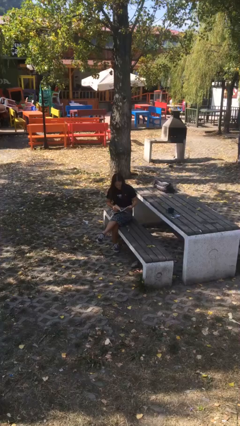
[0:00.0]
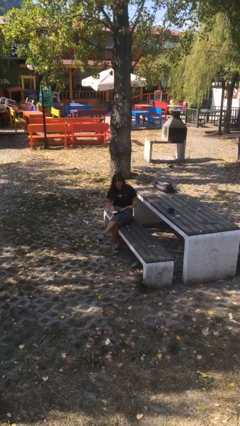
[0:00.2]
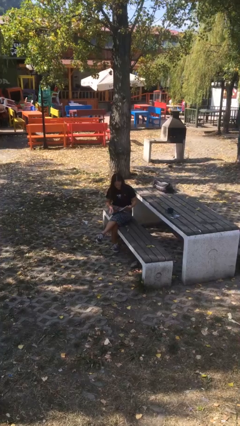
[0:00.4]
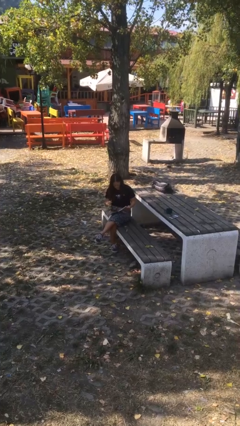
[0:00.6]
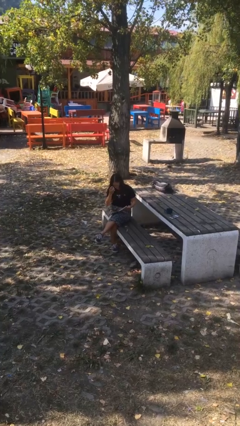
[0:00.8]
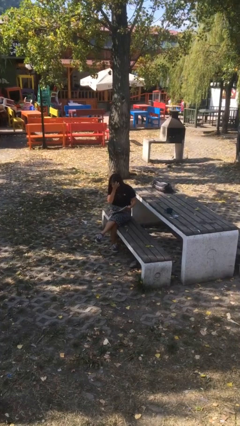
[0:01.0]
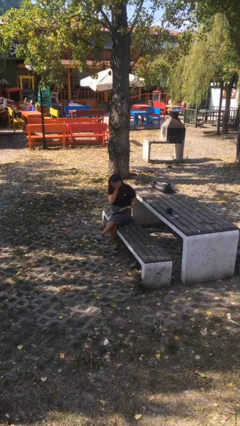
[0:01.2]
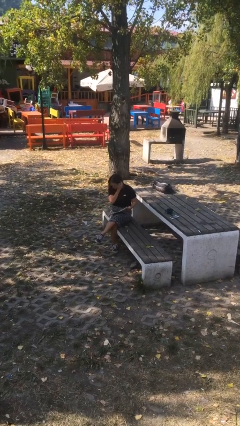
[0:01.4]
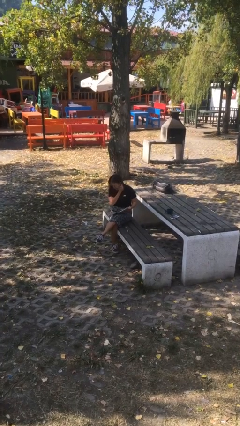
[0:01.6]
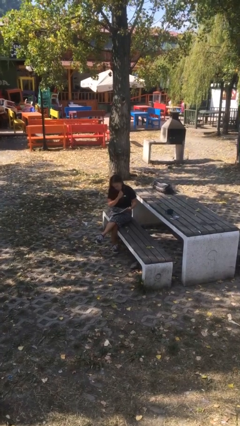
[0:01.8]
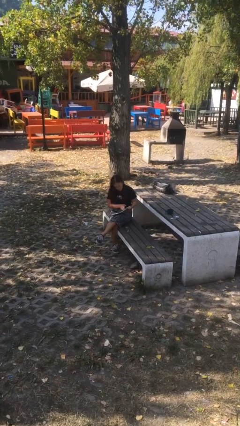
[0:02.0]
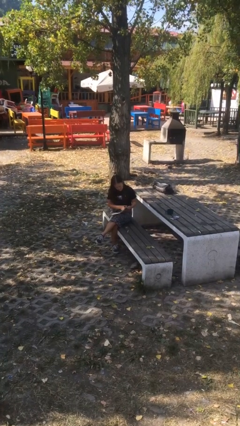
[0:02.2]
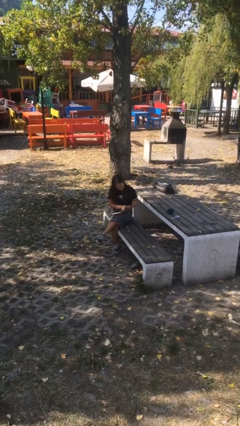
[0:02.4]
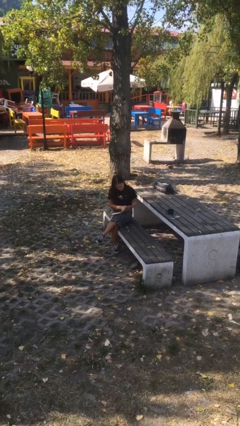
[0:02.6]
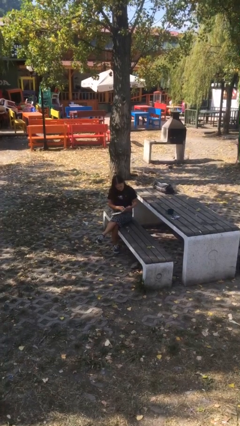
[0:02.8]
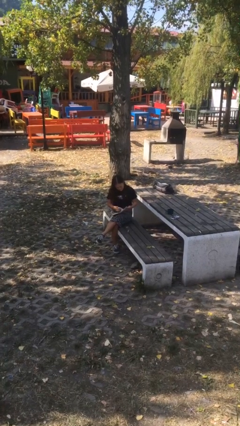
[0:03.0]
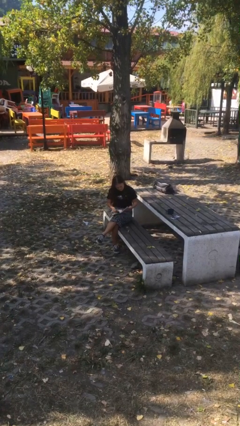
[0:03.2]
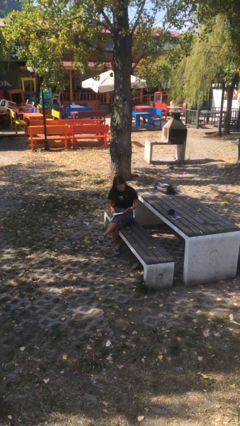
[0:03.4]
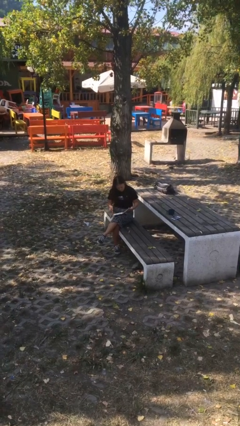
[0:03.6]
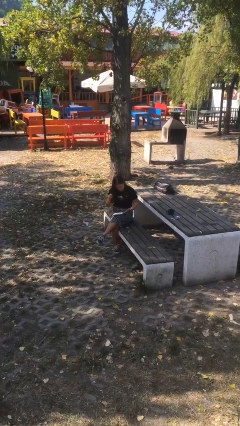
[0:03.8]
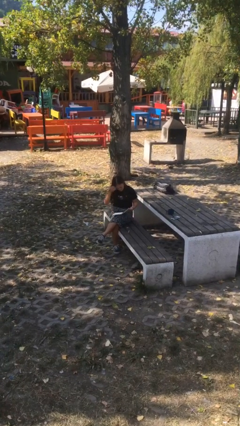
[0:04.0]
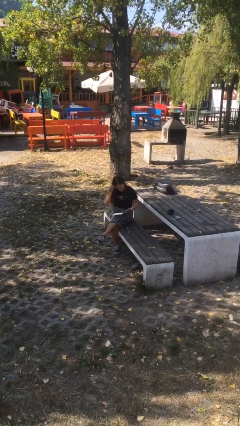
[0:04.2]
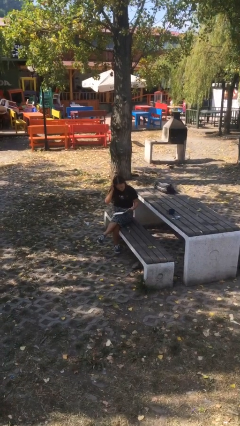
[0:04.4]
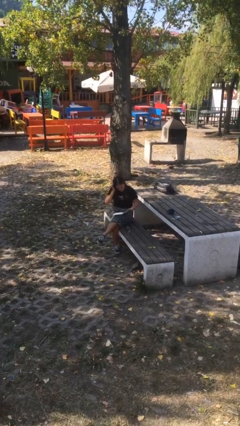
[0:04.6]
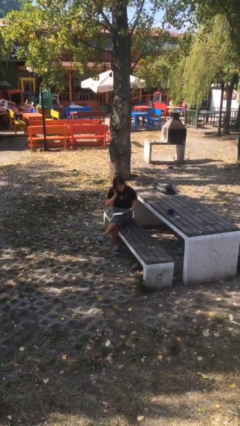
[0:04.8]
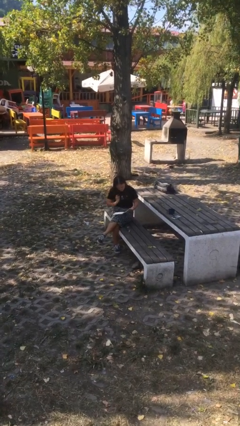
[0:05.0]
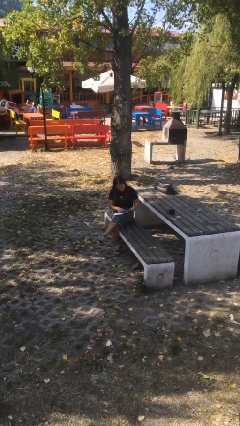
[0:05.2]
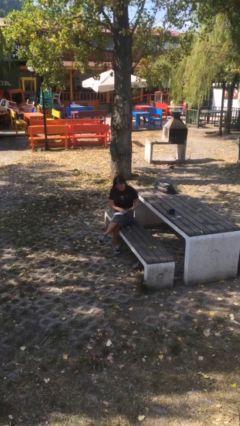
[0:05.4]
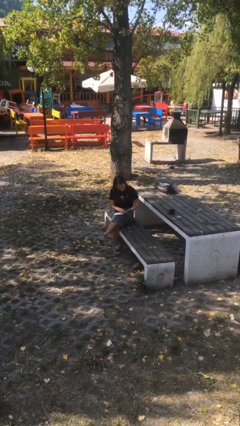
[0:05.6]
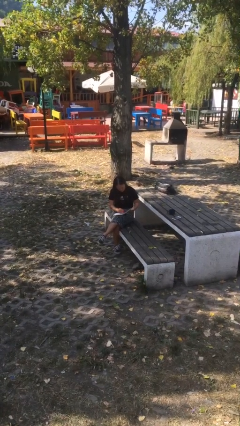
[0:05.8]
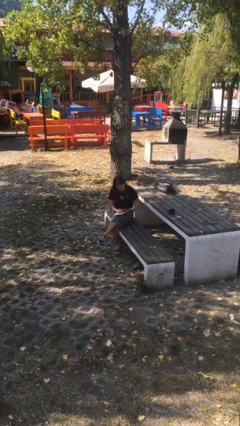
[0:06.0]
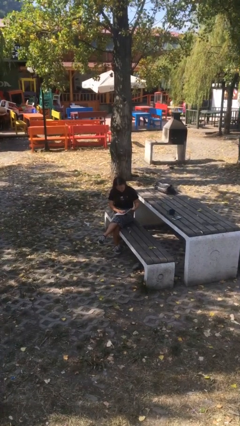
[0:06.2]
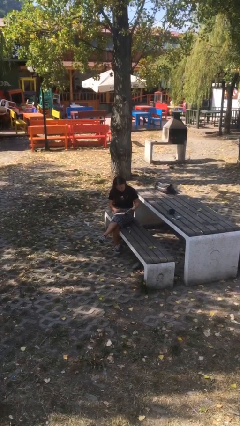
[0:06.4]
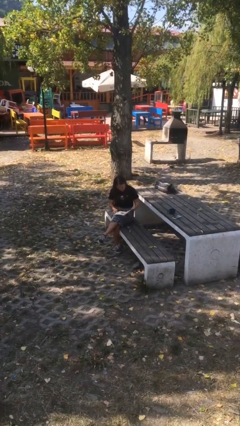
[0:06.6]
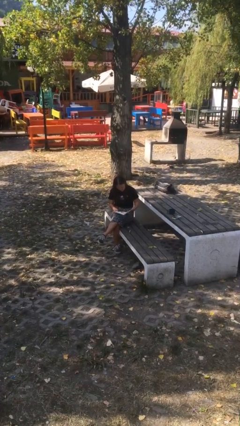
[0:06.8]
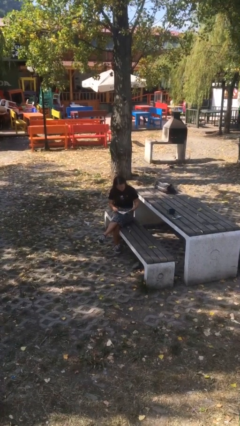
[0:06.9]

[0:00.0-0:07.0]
person reads document

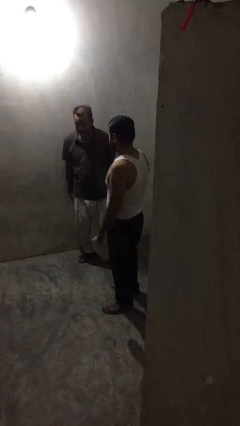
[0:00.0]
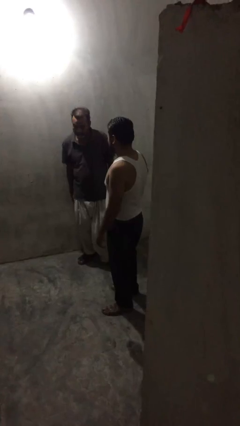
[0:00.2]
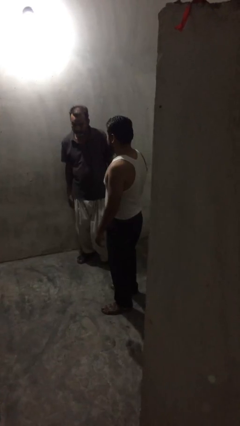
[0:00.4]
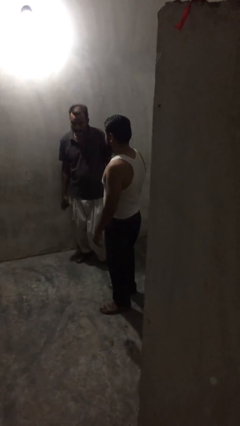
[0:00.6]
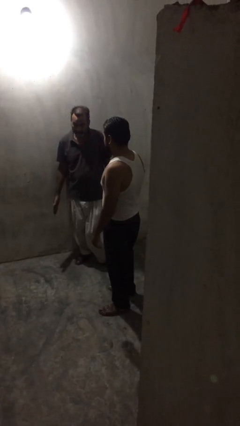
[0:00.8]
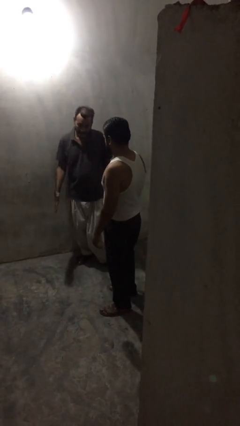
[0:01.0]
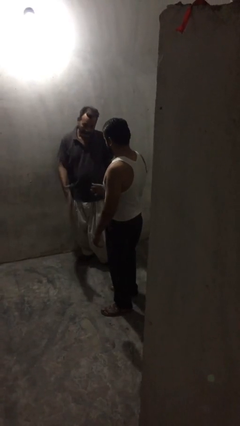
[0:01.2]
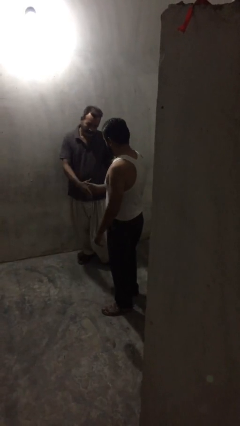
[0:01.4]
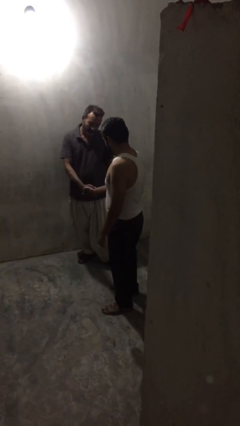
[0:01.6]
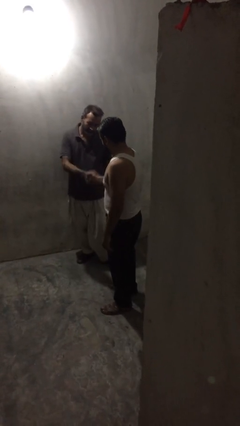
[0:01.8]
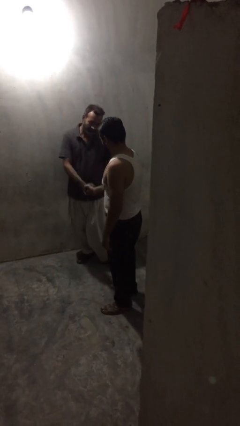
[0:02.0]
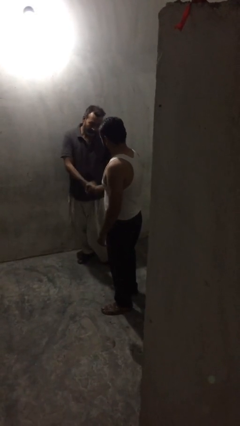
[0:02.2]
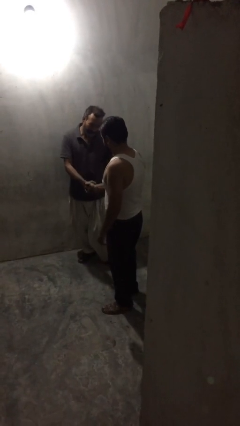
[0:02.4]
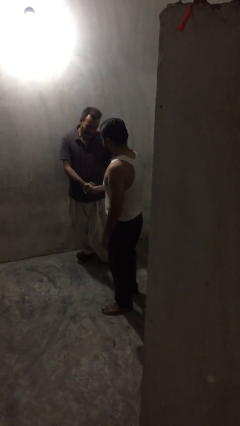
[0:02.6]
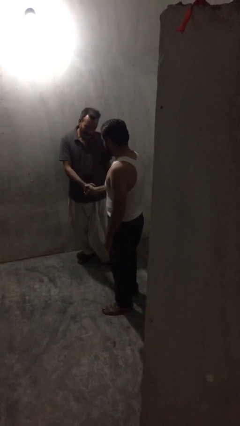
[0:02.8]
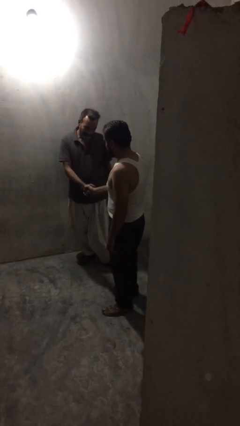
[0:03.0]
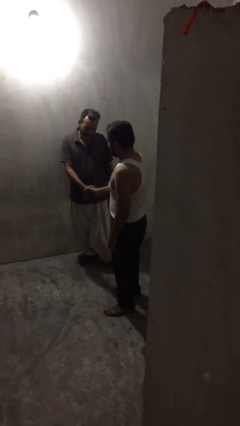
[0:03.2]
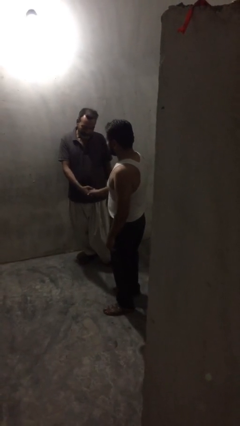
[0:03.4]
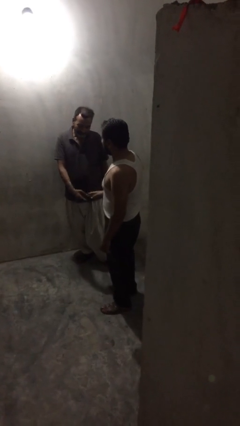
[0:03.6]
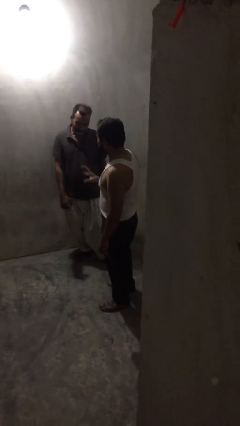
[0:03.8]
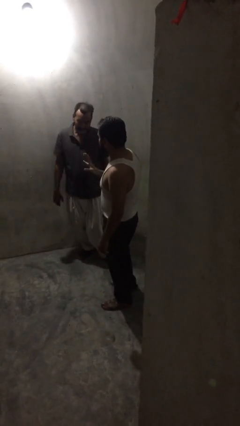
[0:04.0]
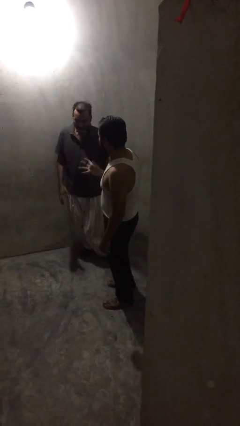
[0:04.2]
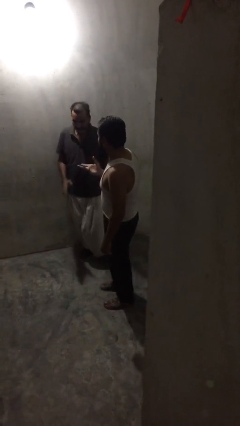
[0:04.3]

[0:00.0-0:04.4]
person shakes hand

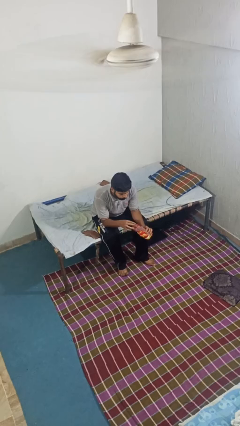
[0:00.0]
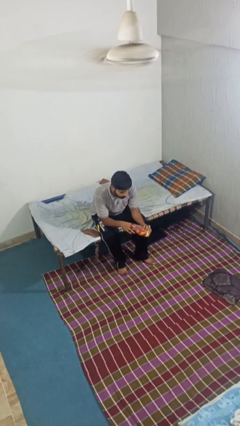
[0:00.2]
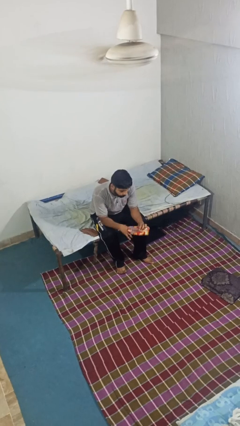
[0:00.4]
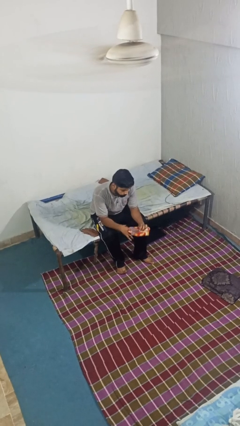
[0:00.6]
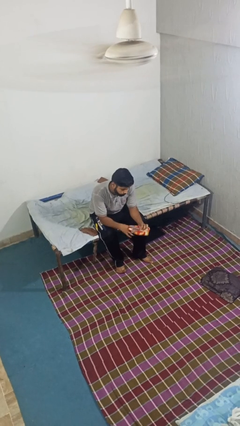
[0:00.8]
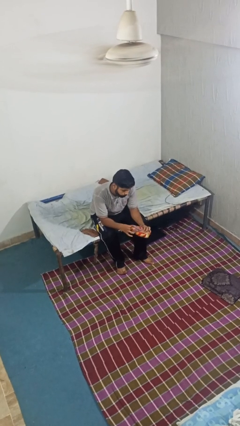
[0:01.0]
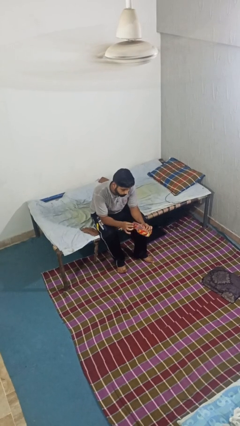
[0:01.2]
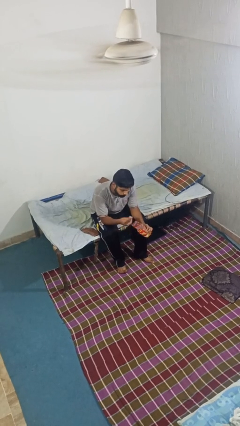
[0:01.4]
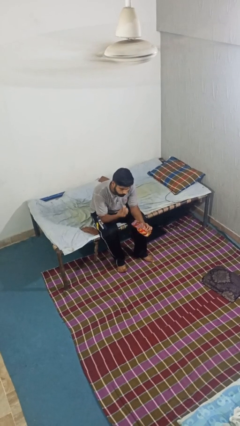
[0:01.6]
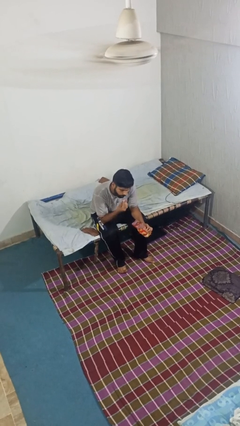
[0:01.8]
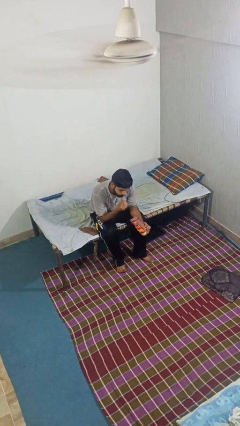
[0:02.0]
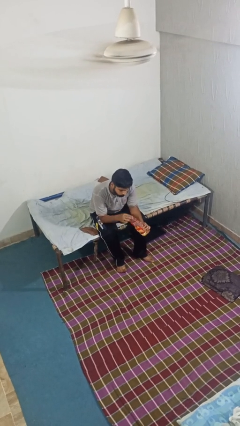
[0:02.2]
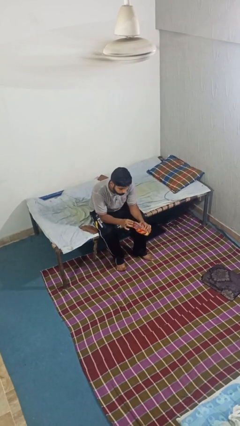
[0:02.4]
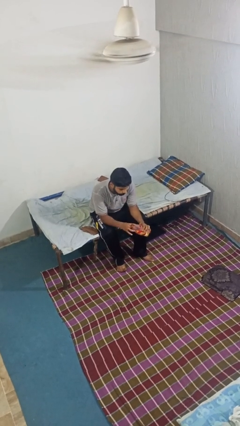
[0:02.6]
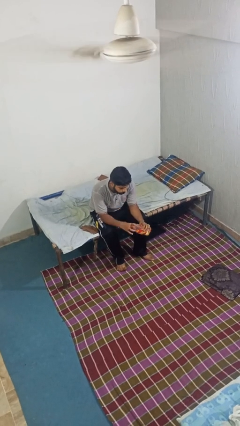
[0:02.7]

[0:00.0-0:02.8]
person eats snack from bag

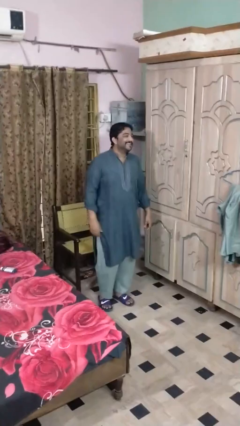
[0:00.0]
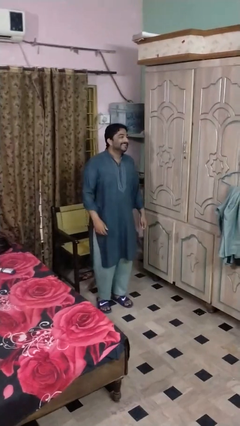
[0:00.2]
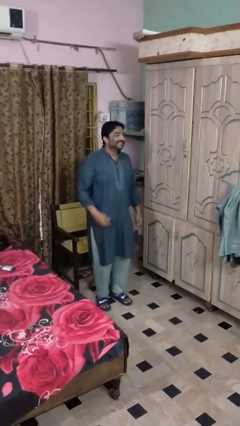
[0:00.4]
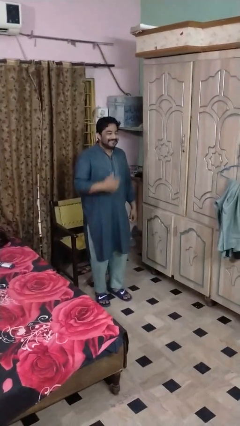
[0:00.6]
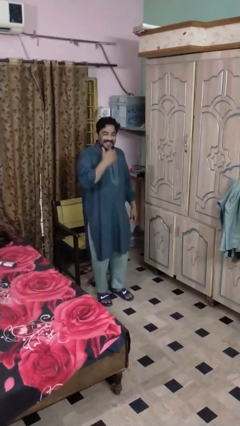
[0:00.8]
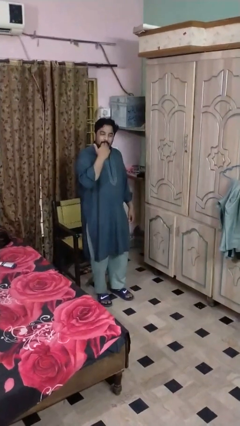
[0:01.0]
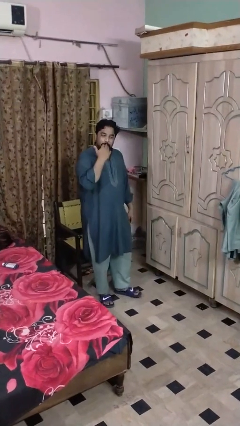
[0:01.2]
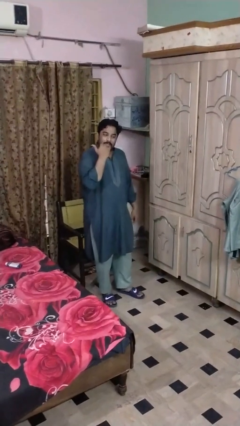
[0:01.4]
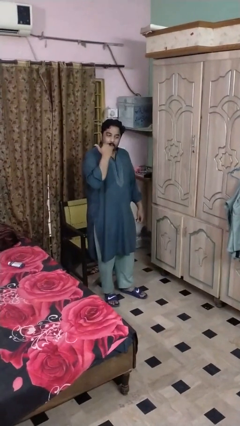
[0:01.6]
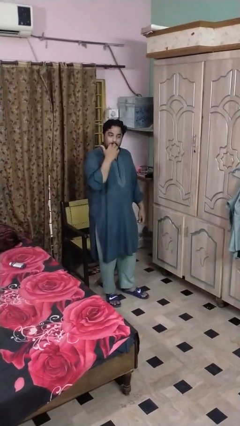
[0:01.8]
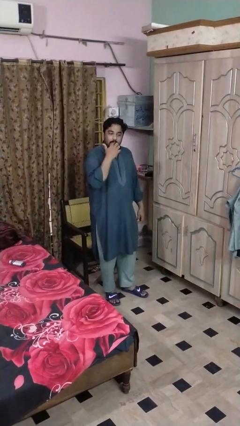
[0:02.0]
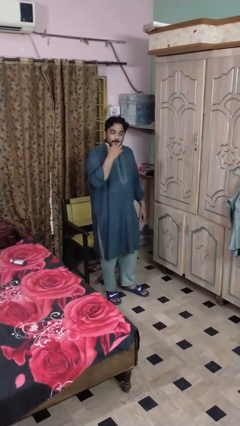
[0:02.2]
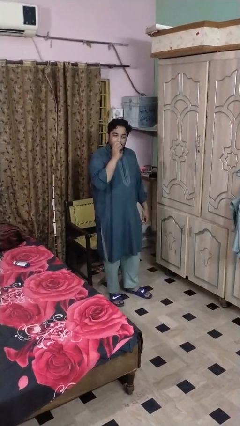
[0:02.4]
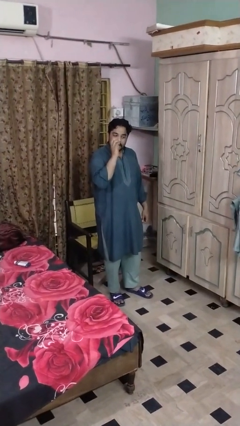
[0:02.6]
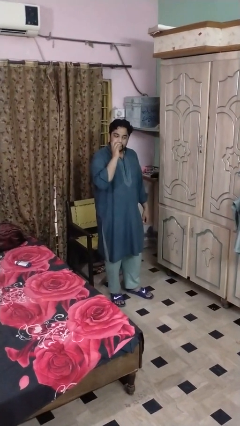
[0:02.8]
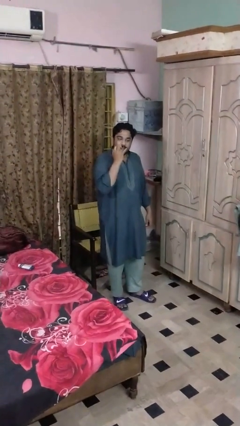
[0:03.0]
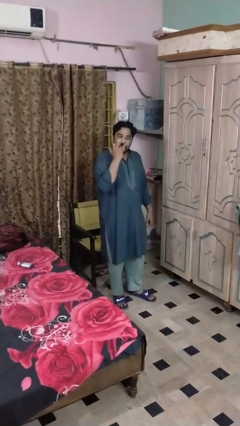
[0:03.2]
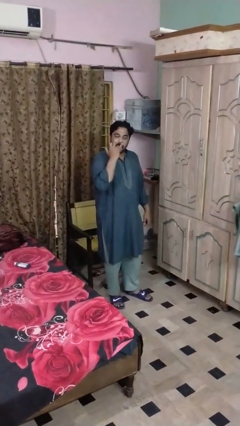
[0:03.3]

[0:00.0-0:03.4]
person licks fingers
